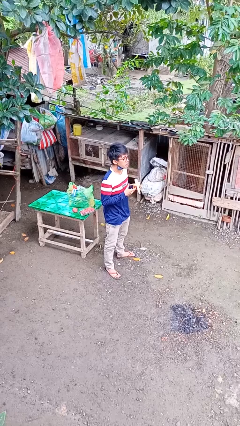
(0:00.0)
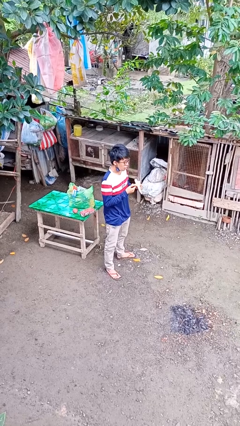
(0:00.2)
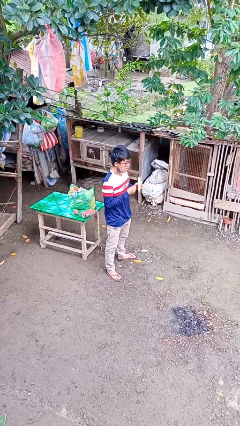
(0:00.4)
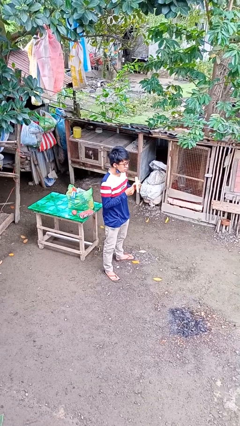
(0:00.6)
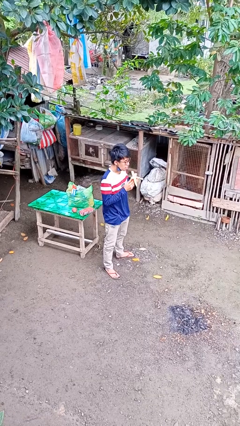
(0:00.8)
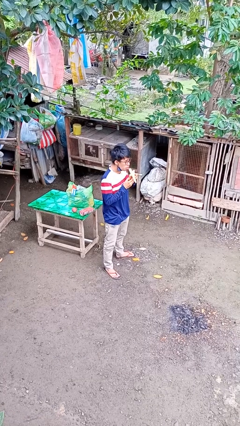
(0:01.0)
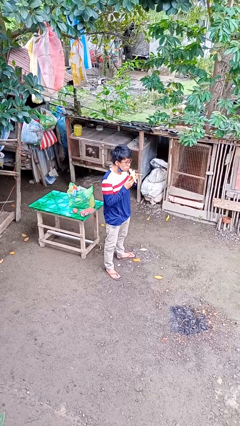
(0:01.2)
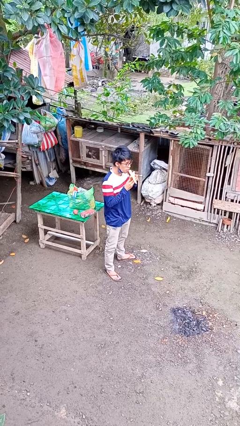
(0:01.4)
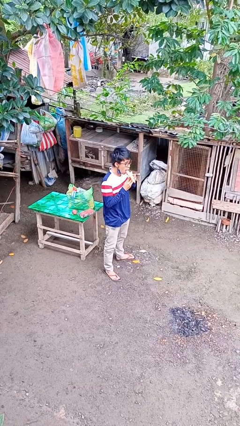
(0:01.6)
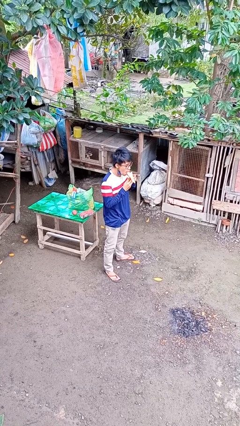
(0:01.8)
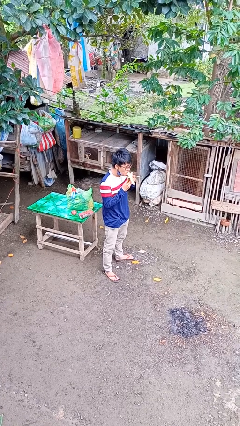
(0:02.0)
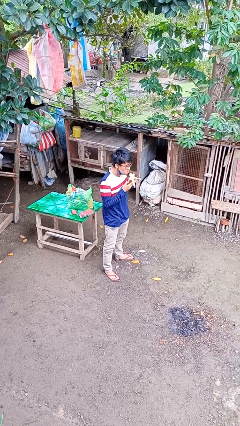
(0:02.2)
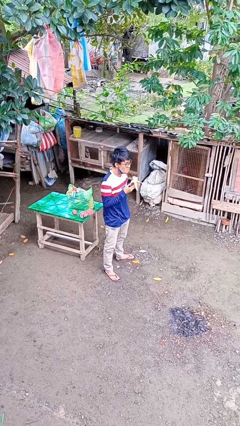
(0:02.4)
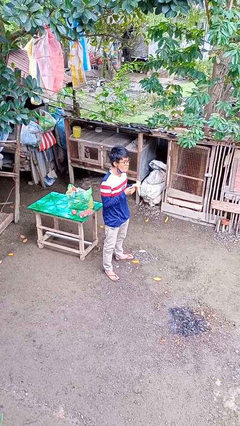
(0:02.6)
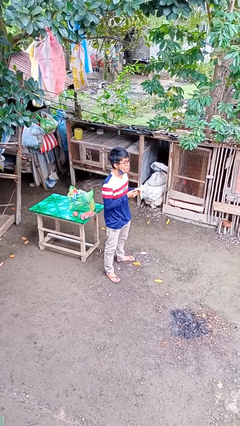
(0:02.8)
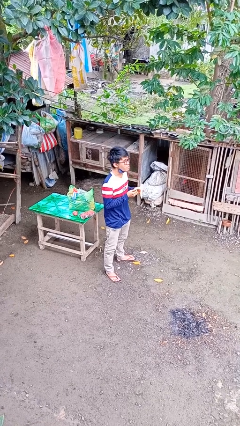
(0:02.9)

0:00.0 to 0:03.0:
person eats banana

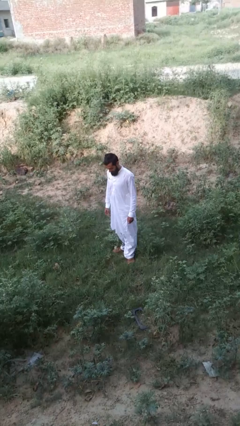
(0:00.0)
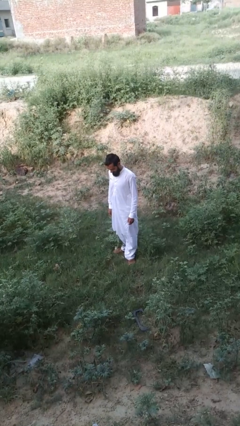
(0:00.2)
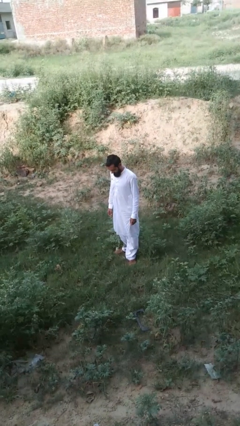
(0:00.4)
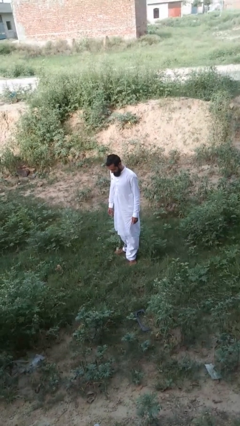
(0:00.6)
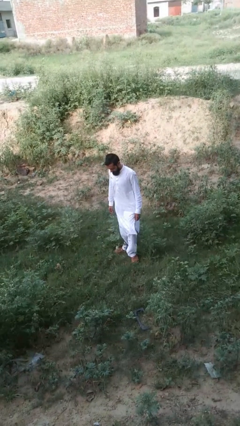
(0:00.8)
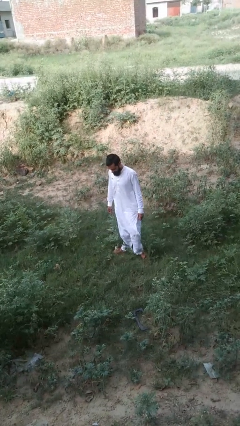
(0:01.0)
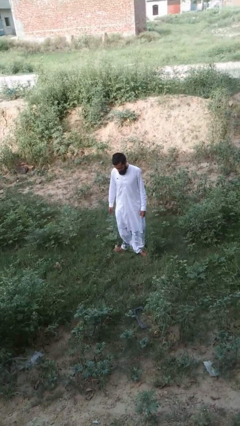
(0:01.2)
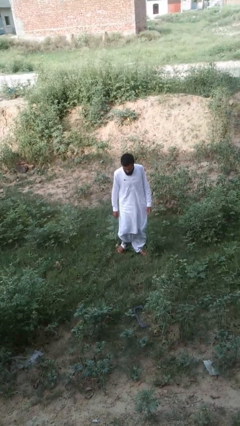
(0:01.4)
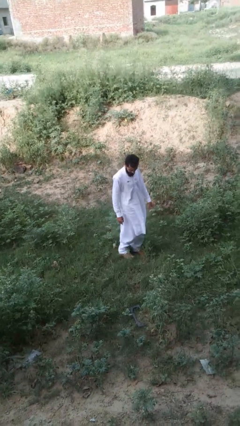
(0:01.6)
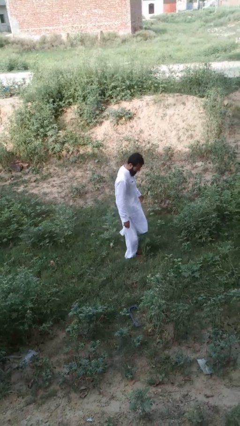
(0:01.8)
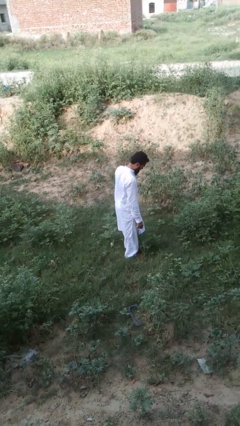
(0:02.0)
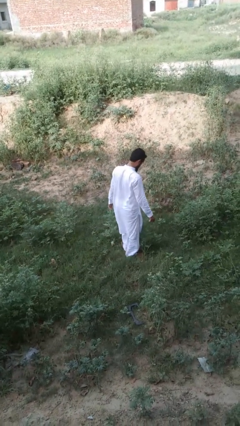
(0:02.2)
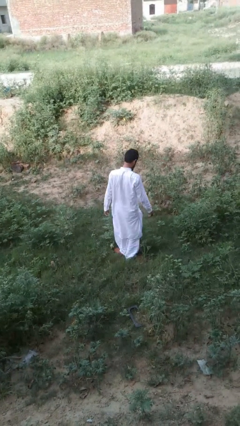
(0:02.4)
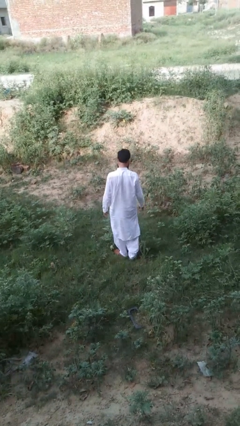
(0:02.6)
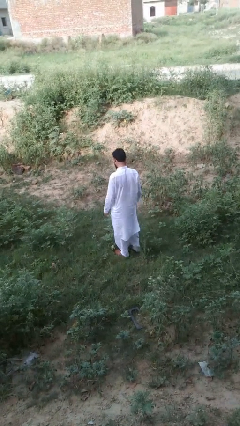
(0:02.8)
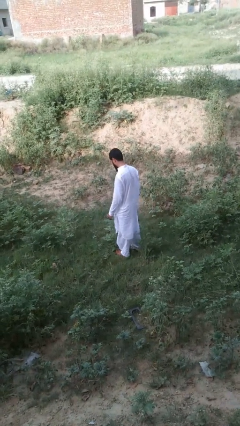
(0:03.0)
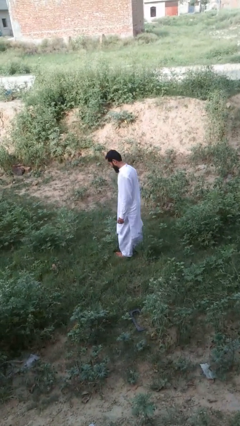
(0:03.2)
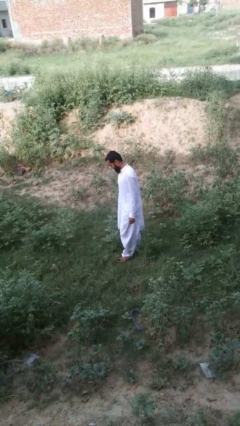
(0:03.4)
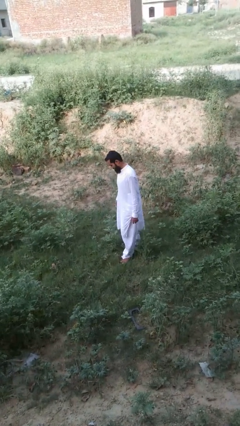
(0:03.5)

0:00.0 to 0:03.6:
person twirls

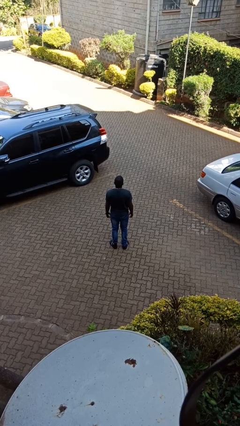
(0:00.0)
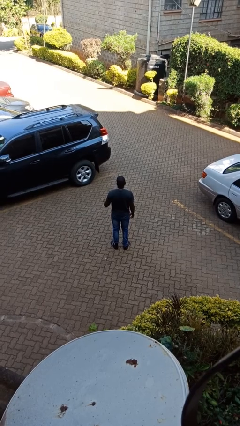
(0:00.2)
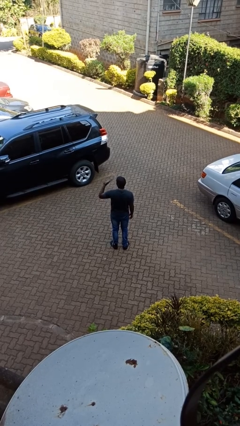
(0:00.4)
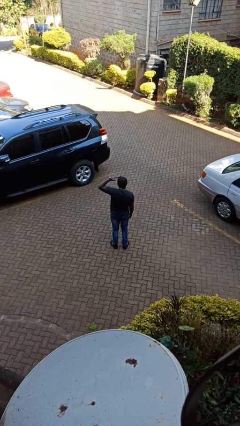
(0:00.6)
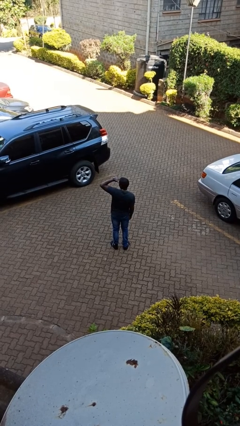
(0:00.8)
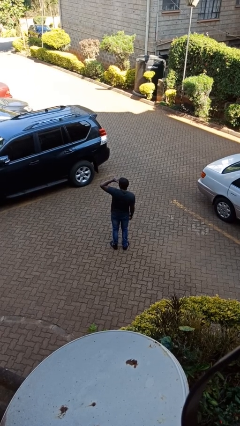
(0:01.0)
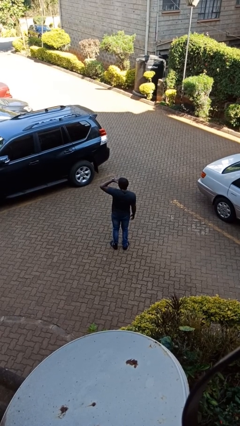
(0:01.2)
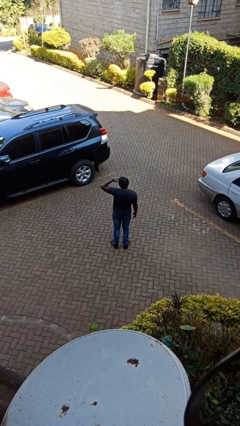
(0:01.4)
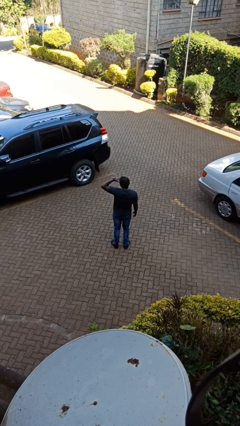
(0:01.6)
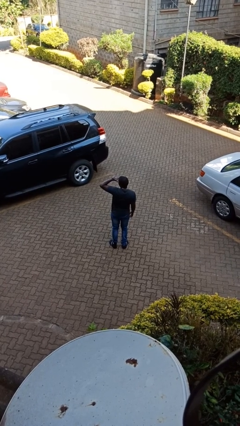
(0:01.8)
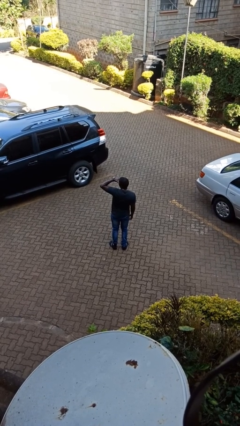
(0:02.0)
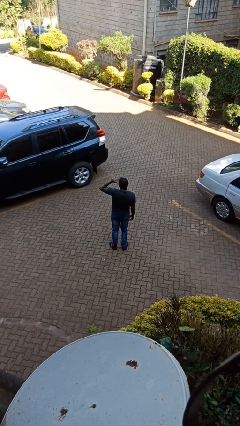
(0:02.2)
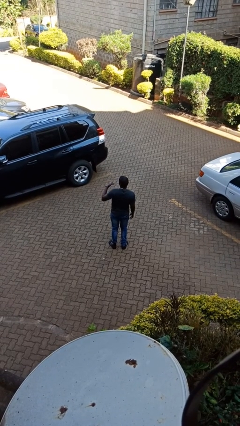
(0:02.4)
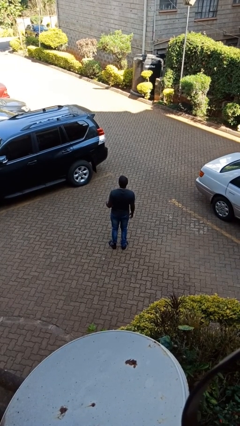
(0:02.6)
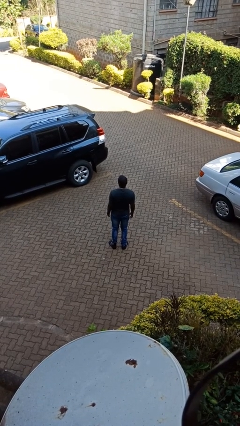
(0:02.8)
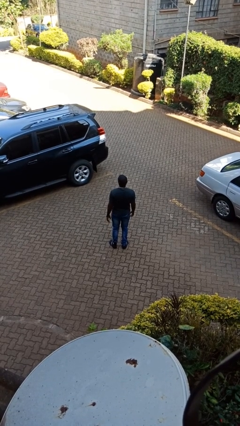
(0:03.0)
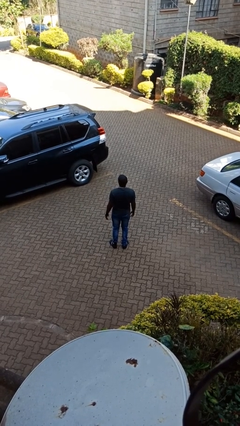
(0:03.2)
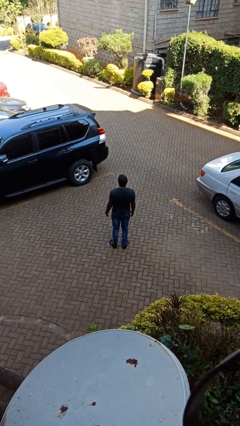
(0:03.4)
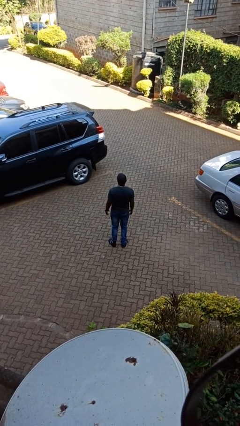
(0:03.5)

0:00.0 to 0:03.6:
person shades eyes

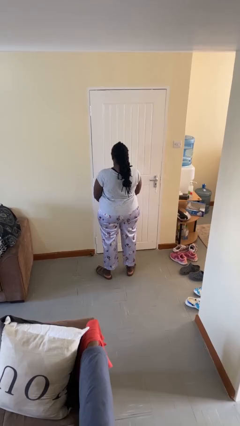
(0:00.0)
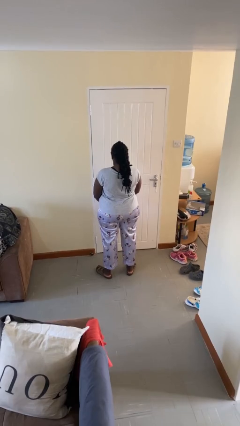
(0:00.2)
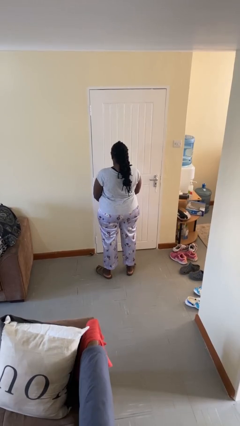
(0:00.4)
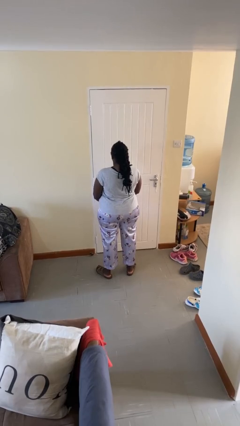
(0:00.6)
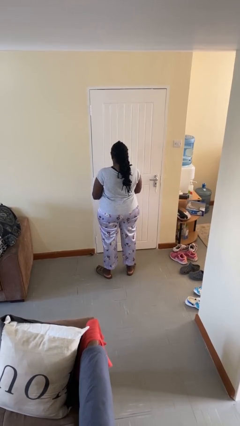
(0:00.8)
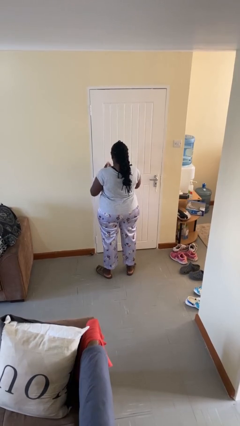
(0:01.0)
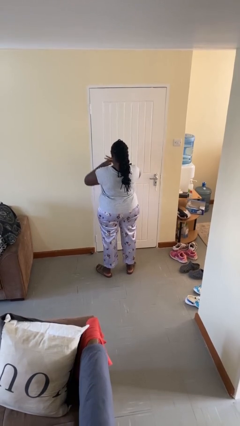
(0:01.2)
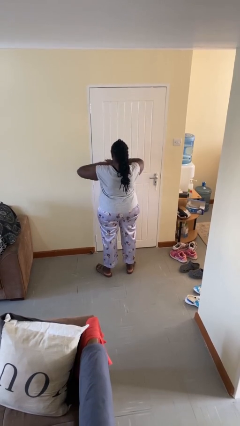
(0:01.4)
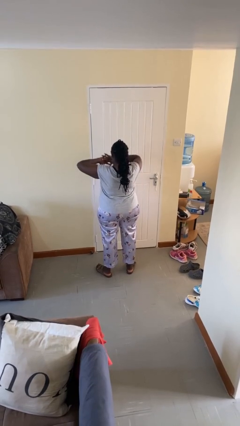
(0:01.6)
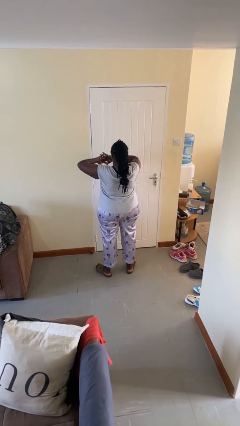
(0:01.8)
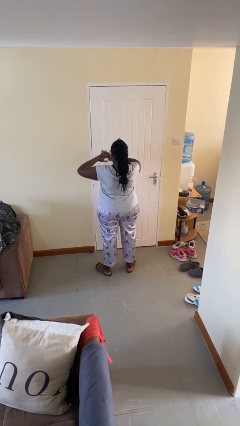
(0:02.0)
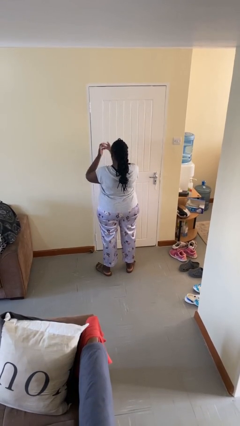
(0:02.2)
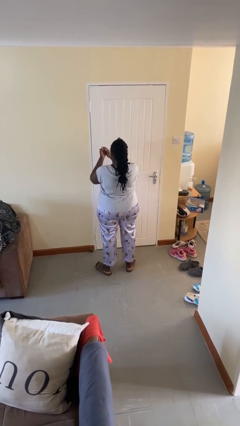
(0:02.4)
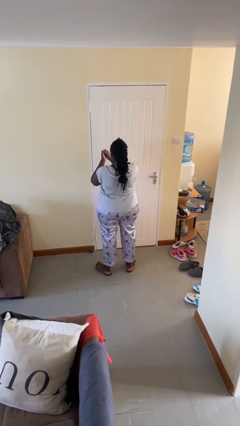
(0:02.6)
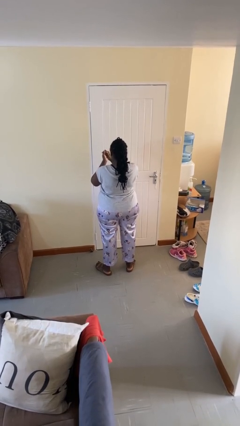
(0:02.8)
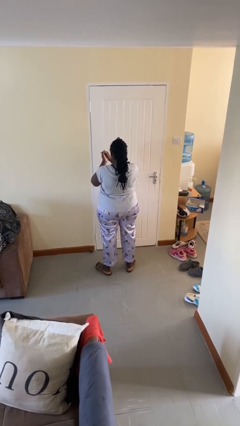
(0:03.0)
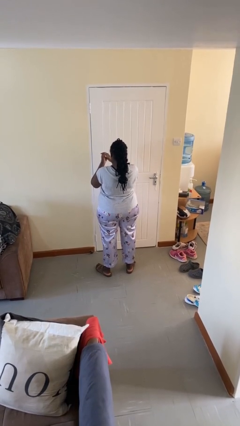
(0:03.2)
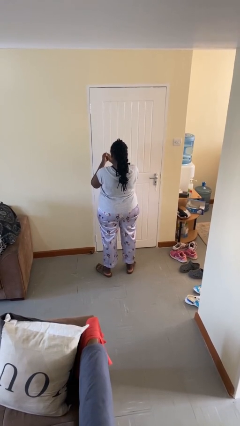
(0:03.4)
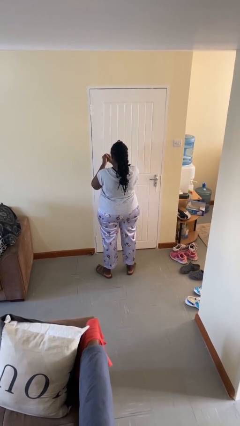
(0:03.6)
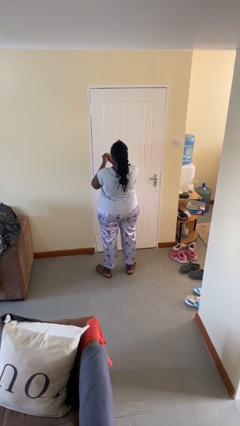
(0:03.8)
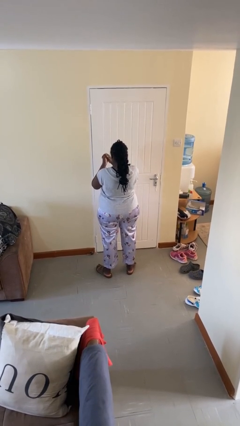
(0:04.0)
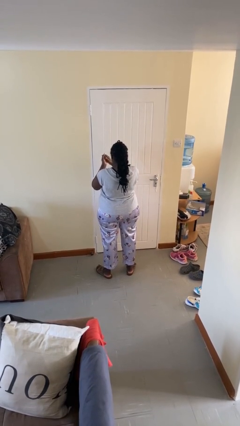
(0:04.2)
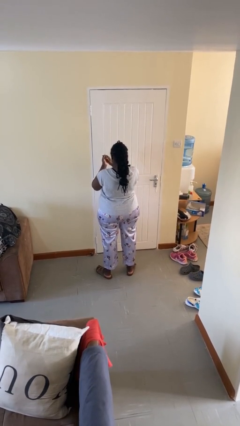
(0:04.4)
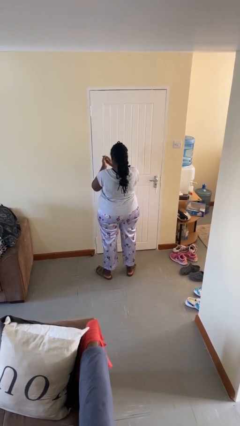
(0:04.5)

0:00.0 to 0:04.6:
person cracks knuckles

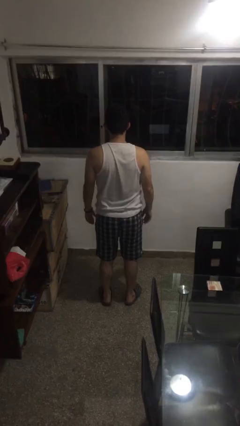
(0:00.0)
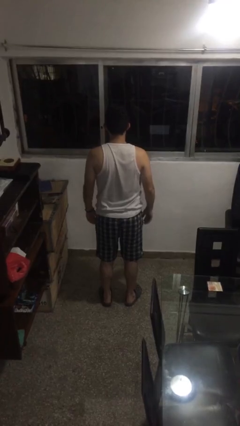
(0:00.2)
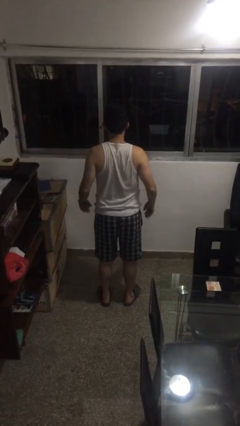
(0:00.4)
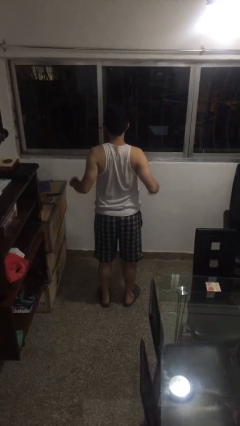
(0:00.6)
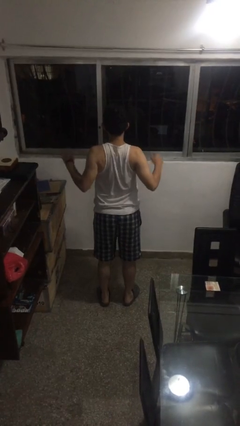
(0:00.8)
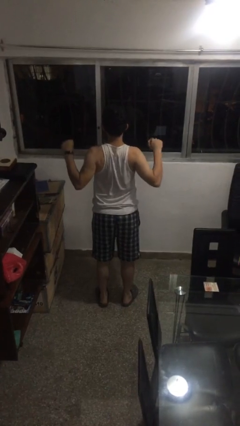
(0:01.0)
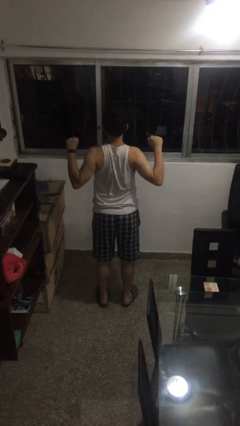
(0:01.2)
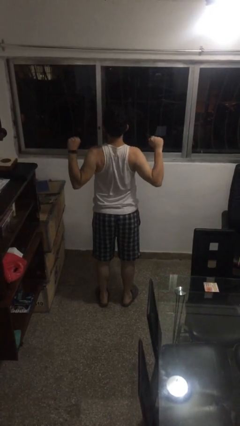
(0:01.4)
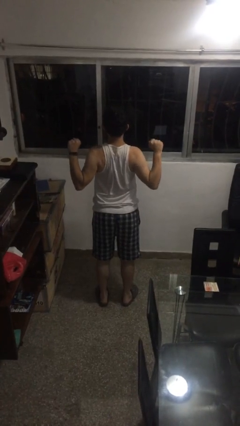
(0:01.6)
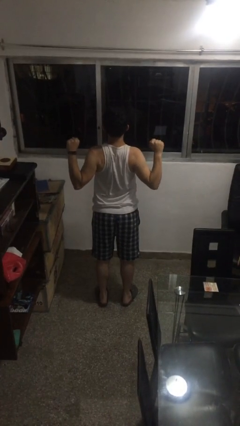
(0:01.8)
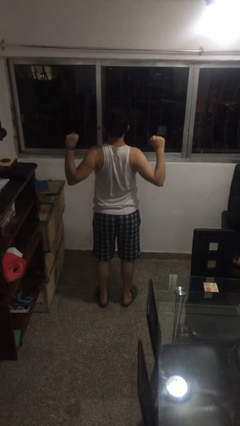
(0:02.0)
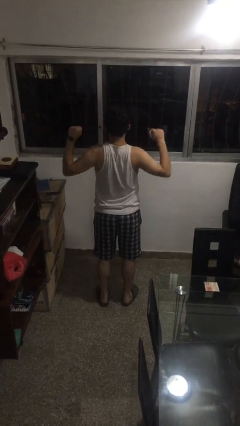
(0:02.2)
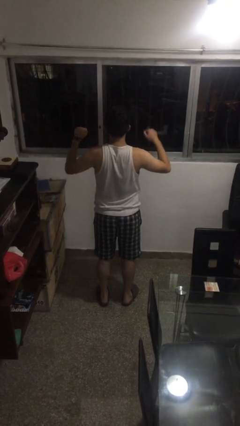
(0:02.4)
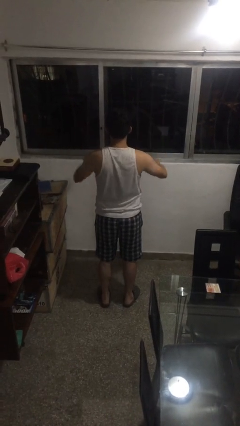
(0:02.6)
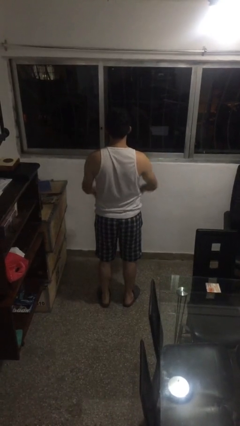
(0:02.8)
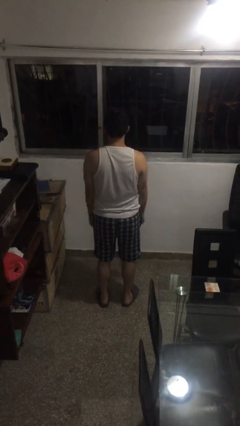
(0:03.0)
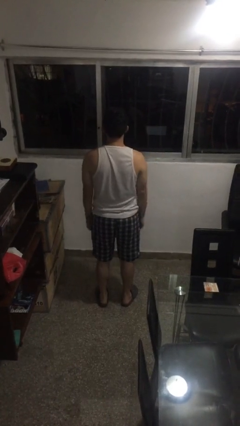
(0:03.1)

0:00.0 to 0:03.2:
person stretches back
